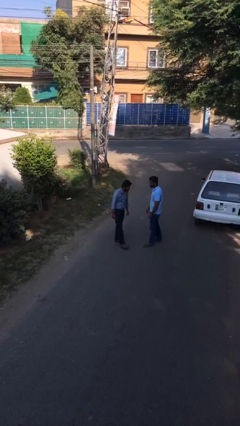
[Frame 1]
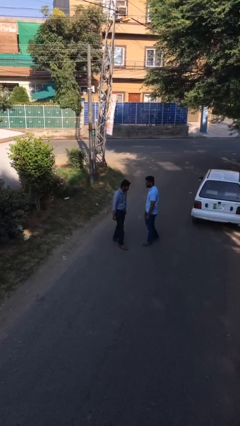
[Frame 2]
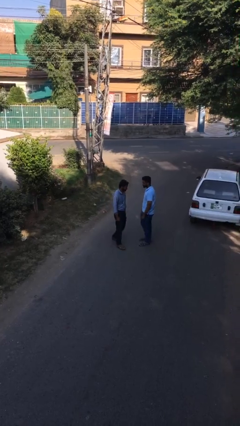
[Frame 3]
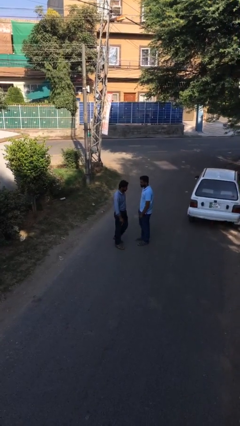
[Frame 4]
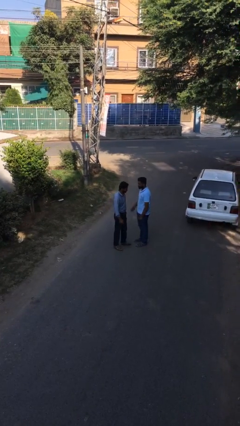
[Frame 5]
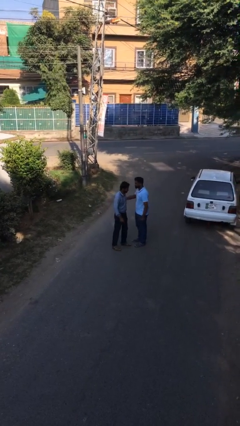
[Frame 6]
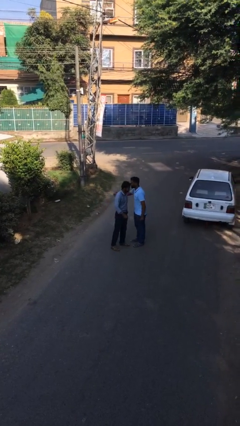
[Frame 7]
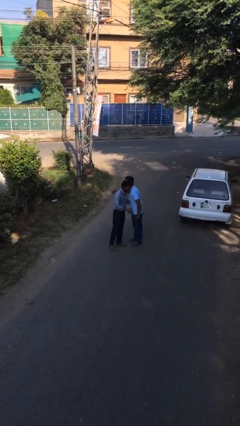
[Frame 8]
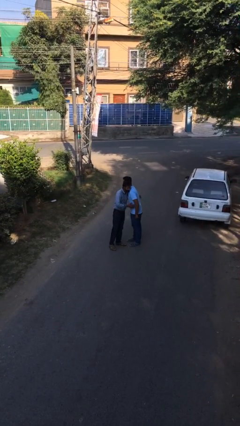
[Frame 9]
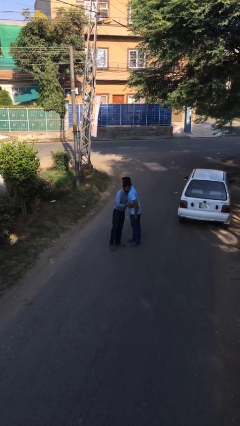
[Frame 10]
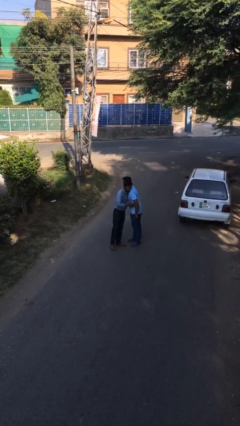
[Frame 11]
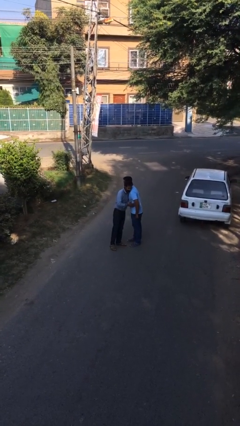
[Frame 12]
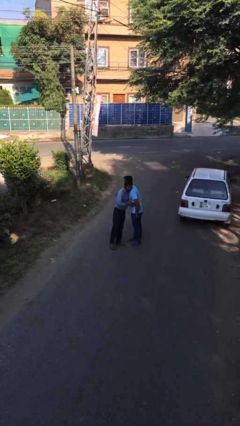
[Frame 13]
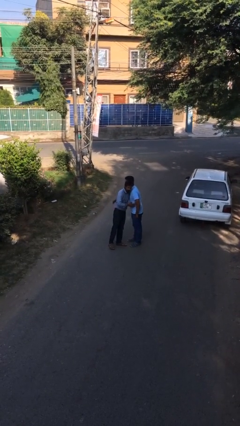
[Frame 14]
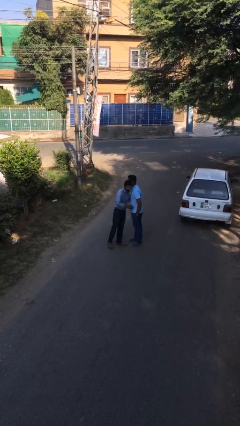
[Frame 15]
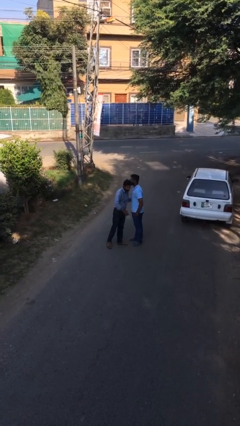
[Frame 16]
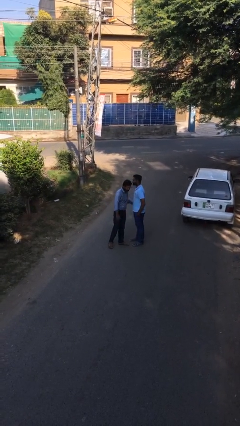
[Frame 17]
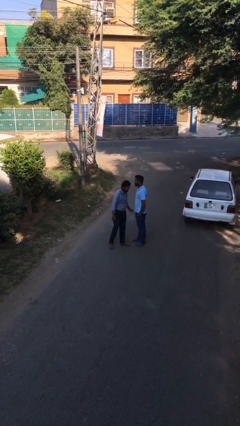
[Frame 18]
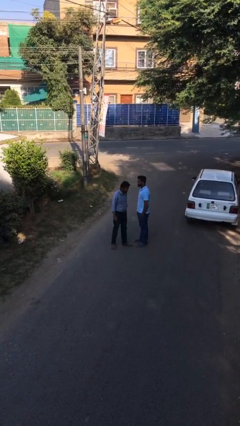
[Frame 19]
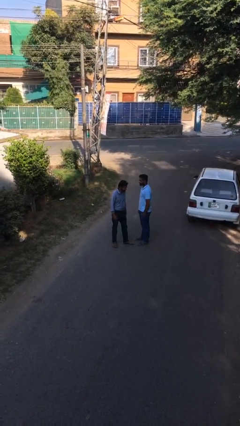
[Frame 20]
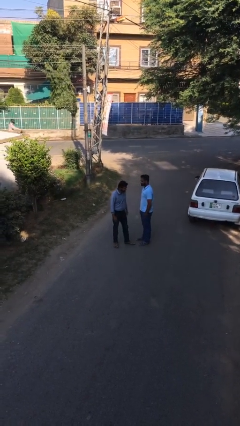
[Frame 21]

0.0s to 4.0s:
person embraces person

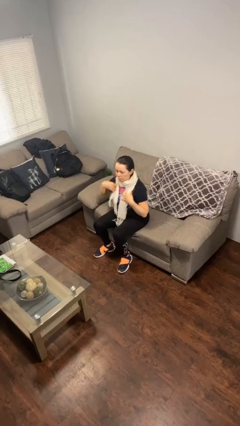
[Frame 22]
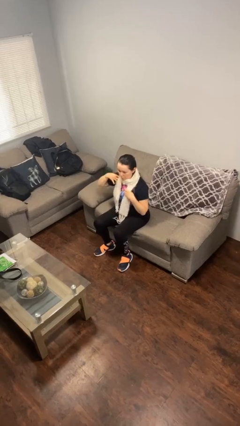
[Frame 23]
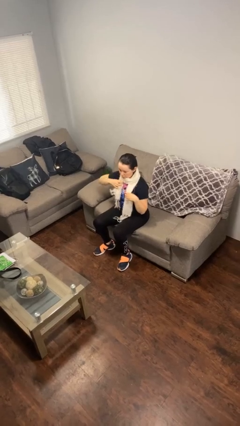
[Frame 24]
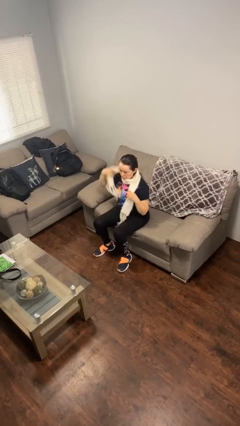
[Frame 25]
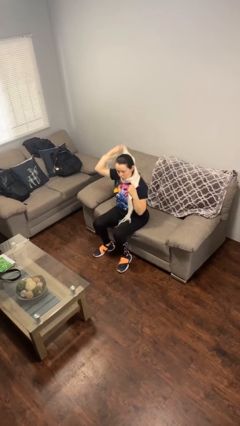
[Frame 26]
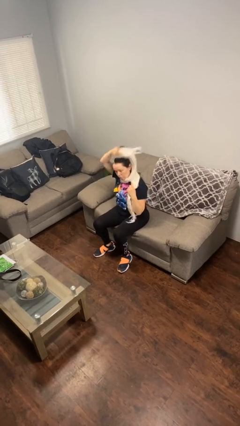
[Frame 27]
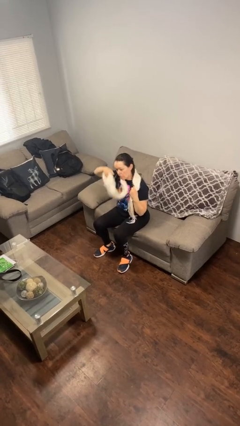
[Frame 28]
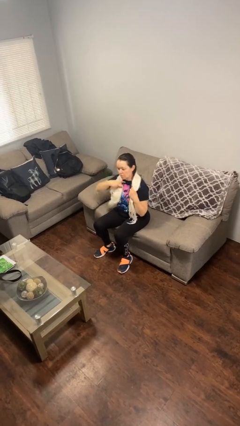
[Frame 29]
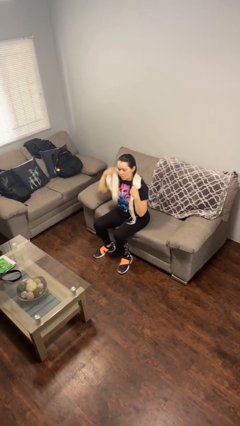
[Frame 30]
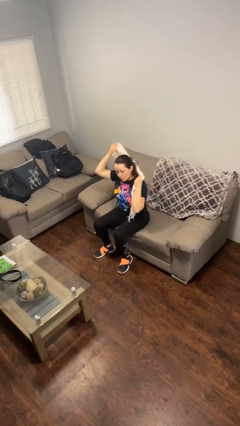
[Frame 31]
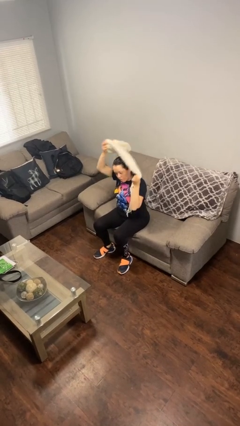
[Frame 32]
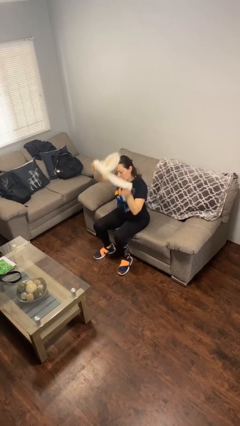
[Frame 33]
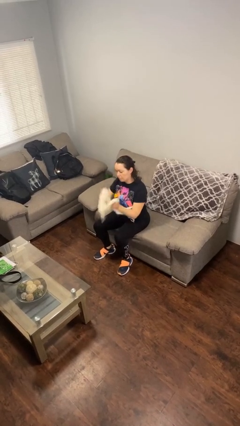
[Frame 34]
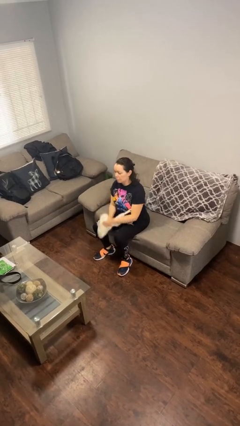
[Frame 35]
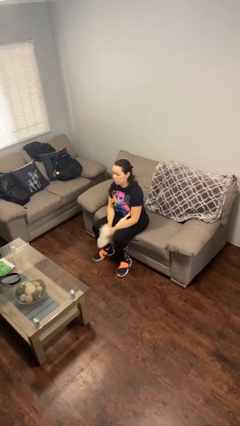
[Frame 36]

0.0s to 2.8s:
person takes off scarf

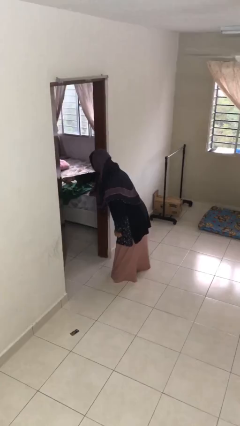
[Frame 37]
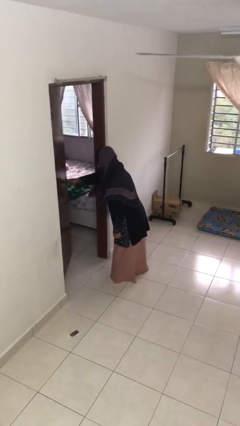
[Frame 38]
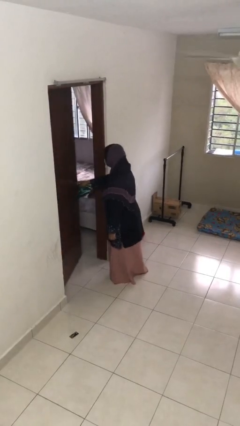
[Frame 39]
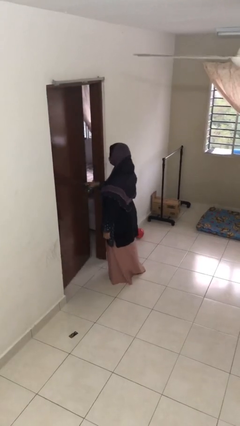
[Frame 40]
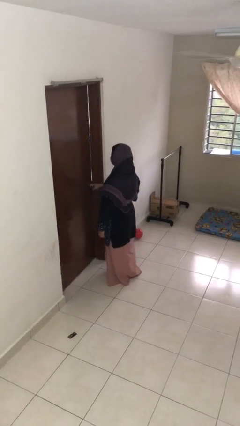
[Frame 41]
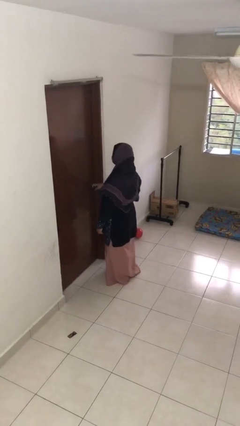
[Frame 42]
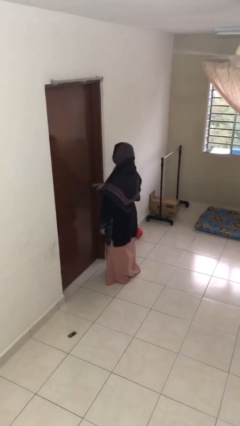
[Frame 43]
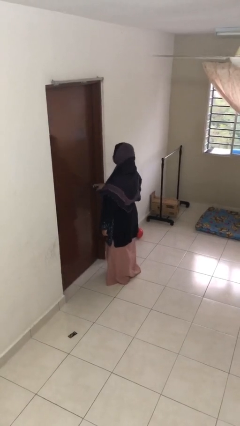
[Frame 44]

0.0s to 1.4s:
person closes facility door

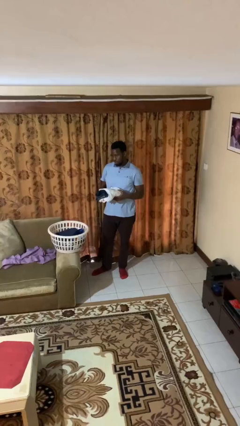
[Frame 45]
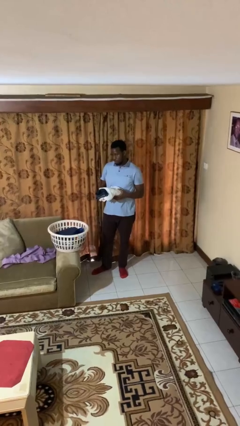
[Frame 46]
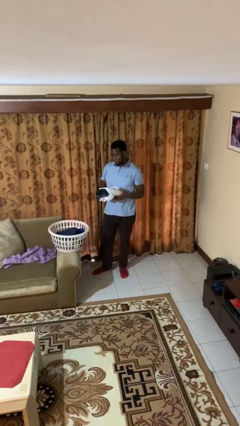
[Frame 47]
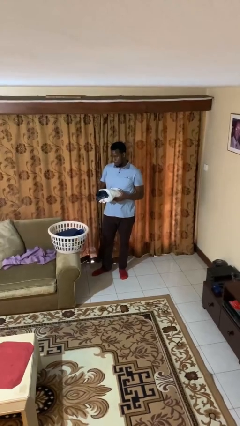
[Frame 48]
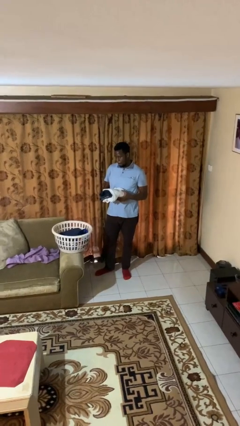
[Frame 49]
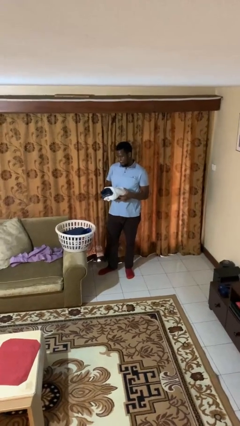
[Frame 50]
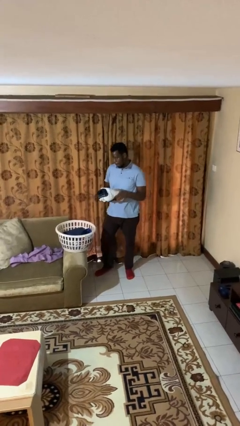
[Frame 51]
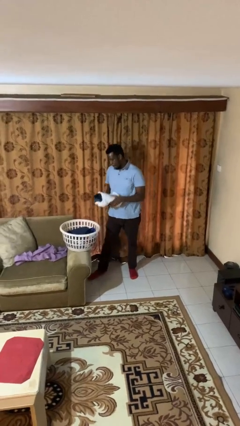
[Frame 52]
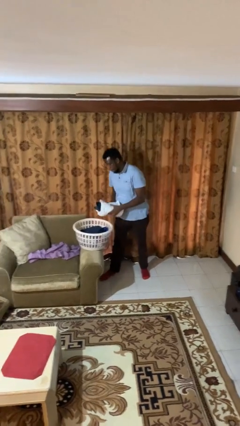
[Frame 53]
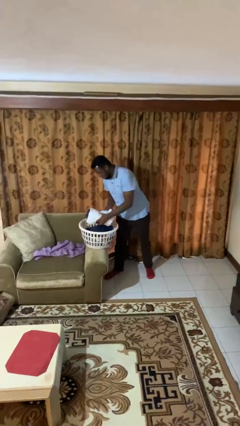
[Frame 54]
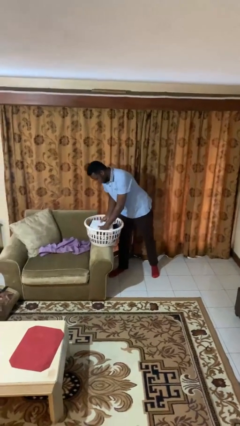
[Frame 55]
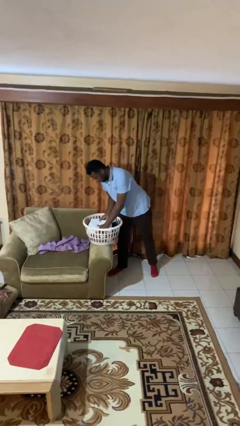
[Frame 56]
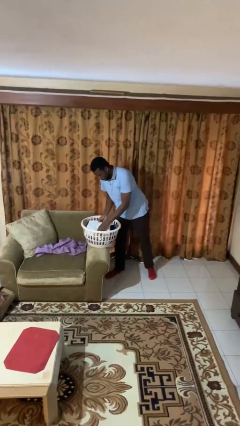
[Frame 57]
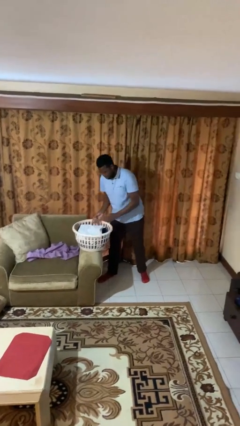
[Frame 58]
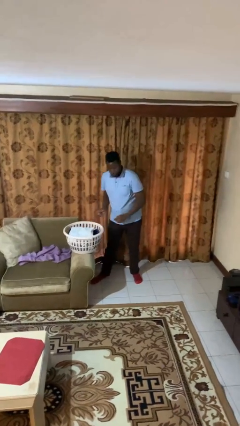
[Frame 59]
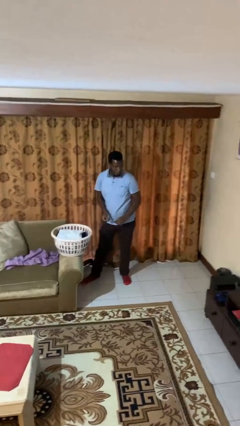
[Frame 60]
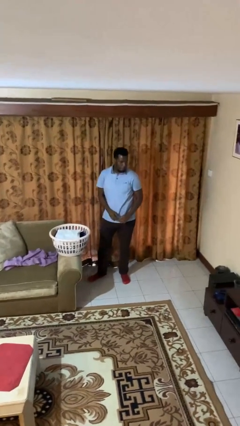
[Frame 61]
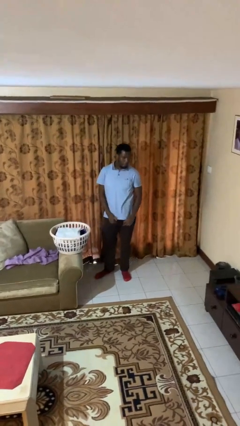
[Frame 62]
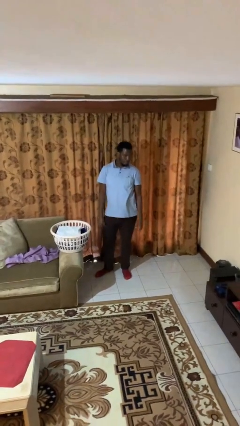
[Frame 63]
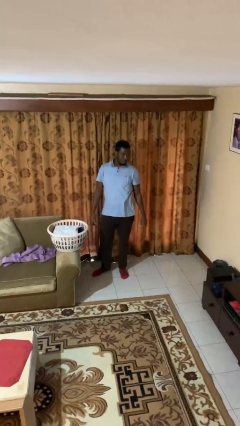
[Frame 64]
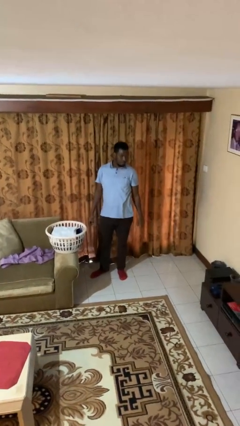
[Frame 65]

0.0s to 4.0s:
person puts object into basket

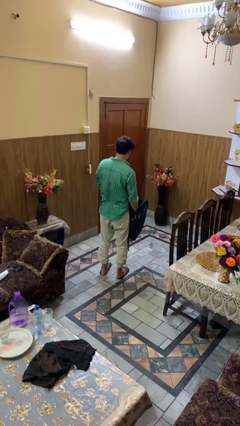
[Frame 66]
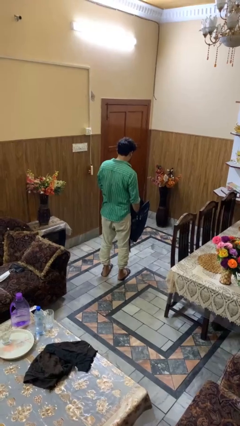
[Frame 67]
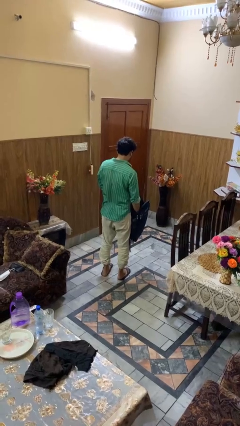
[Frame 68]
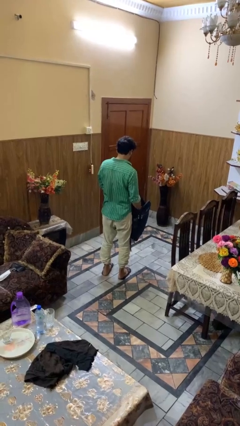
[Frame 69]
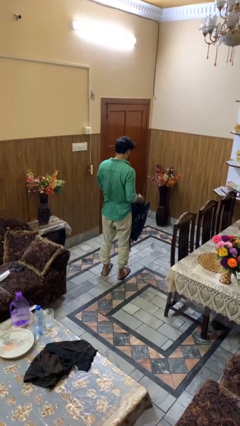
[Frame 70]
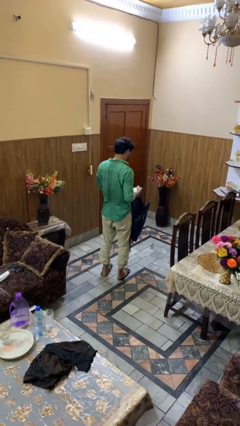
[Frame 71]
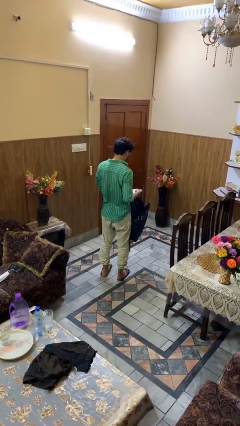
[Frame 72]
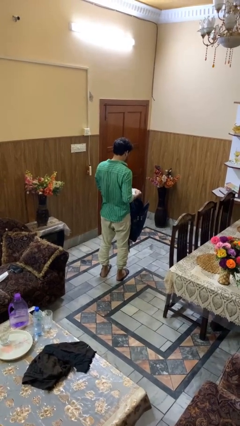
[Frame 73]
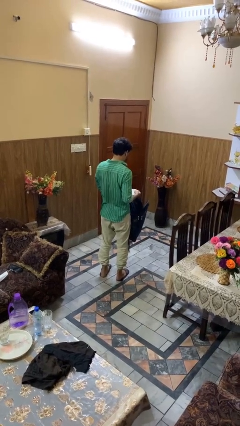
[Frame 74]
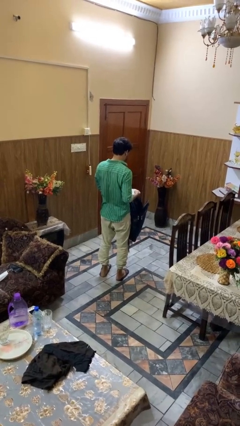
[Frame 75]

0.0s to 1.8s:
person takes object from backpack

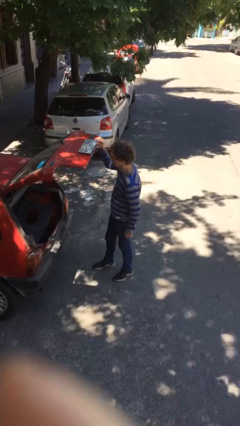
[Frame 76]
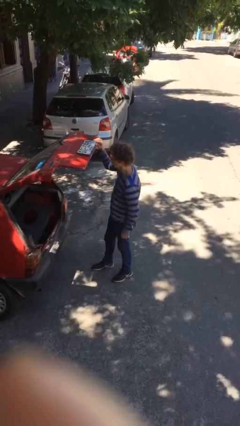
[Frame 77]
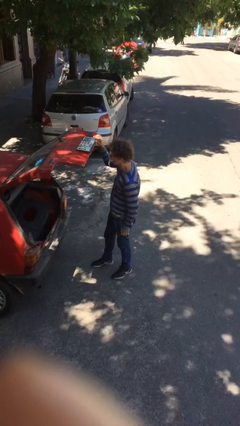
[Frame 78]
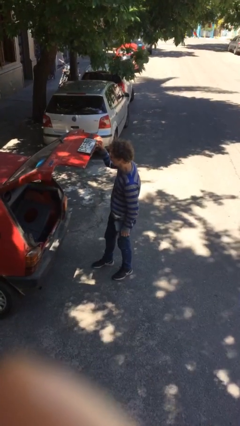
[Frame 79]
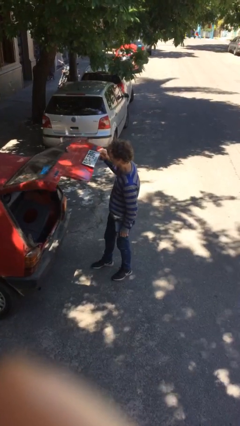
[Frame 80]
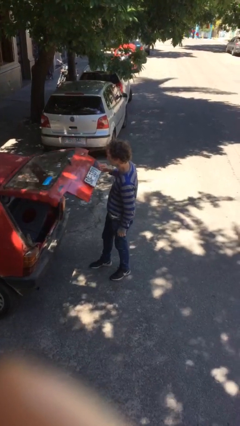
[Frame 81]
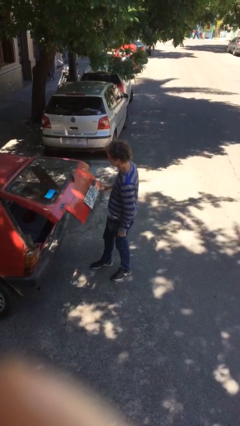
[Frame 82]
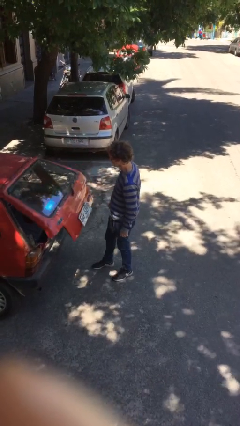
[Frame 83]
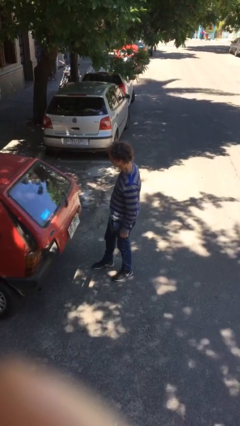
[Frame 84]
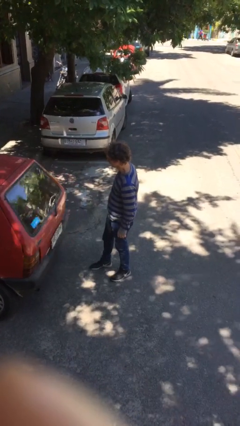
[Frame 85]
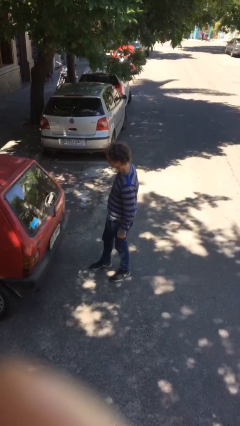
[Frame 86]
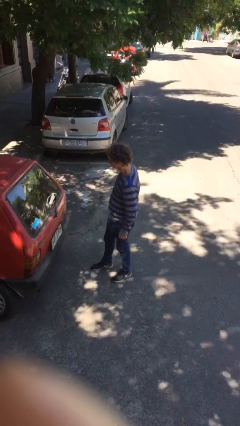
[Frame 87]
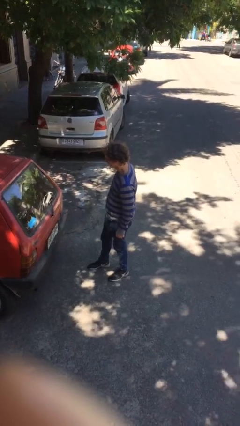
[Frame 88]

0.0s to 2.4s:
person closes car trunk

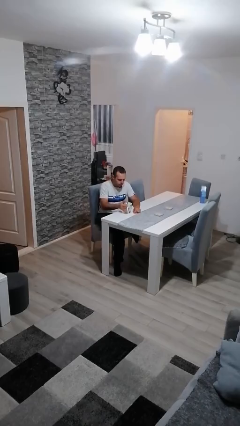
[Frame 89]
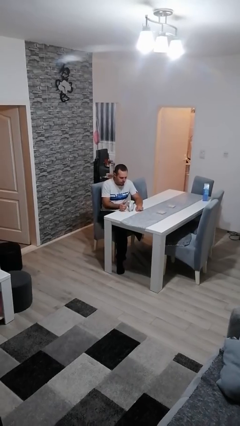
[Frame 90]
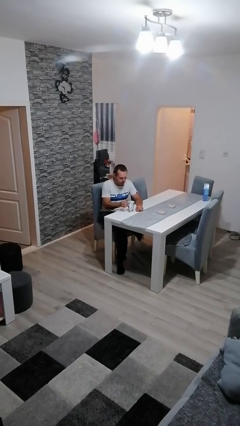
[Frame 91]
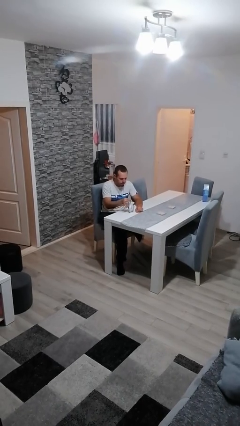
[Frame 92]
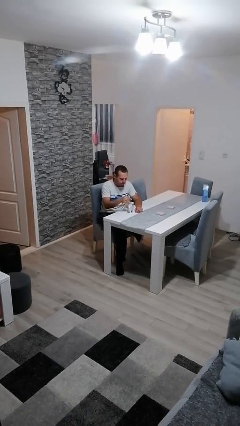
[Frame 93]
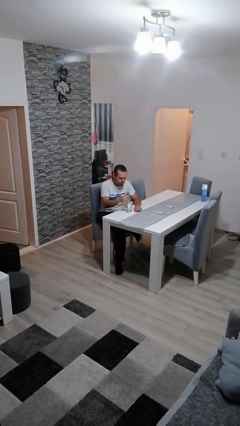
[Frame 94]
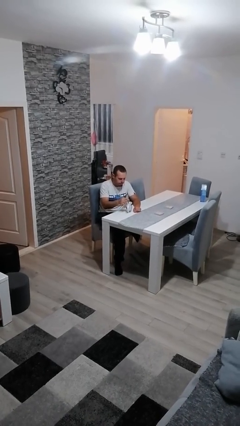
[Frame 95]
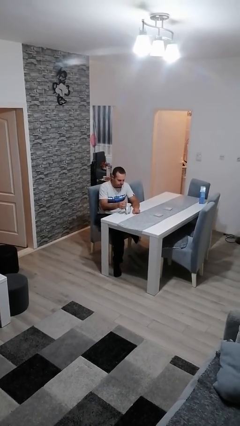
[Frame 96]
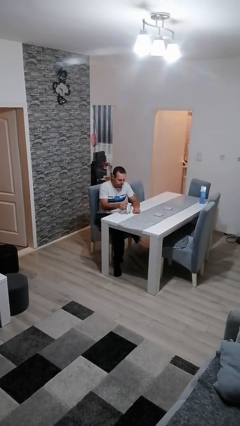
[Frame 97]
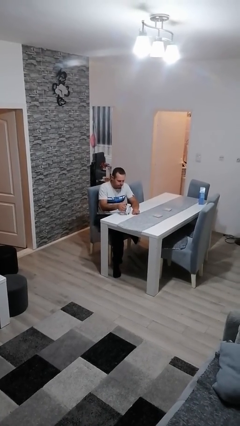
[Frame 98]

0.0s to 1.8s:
person stirs mug
